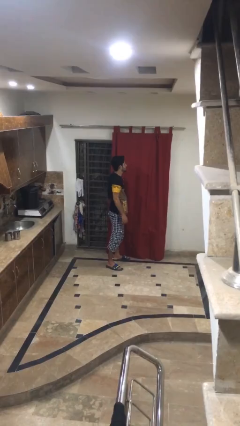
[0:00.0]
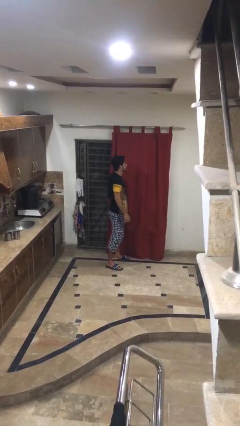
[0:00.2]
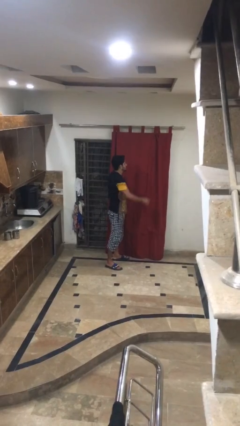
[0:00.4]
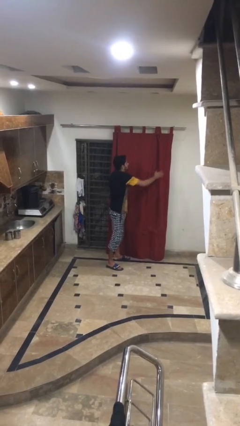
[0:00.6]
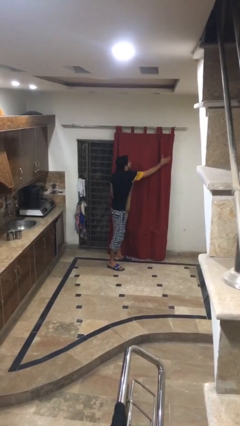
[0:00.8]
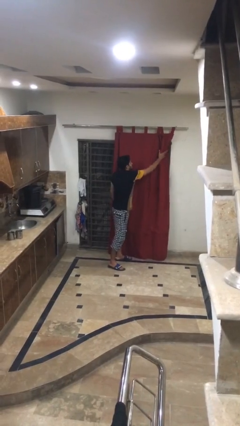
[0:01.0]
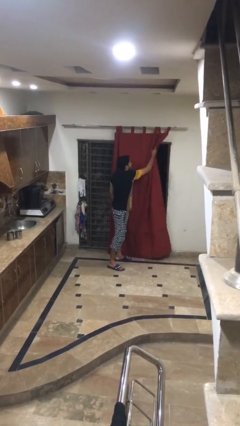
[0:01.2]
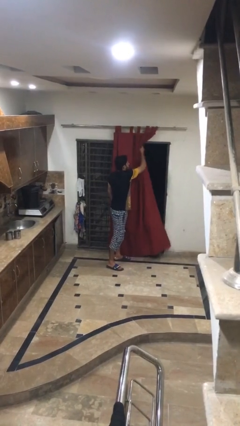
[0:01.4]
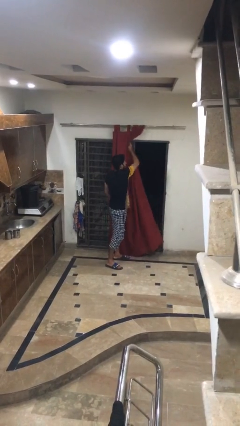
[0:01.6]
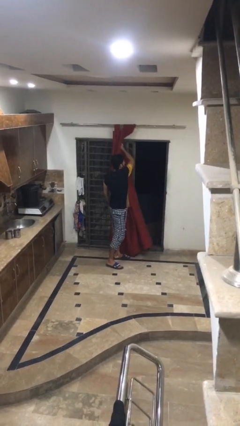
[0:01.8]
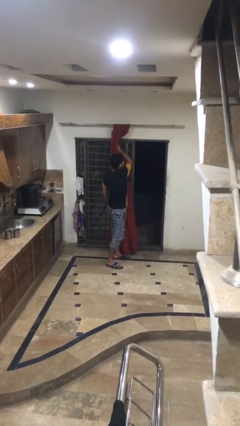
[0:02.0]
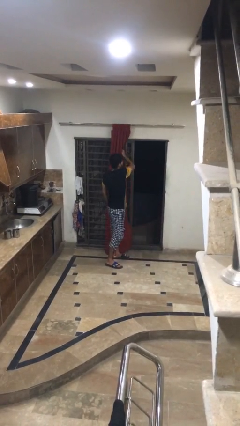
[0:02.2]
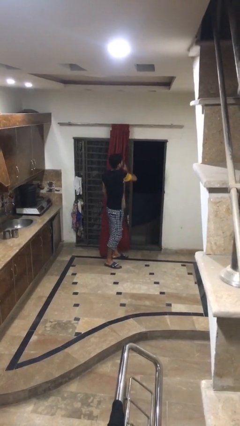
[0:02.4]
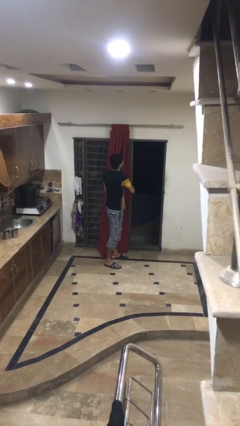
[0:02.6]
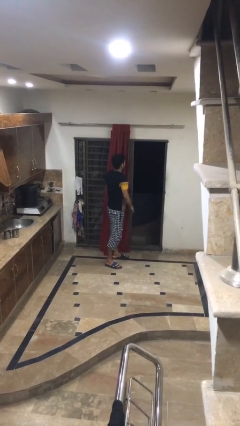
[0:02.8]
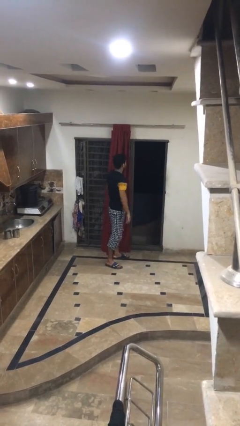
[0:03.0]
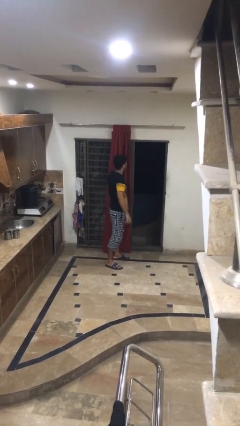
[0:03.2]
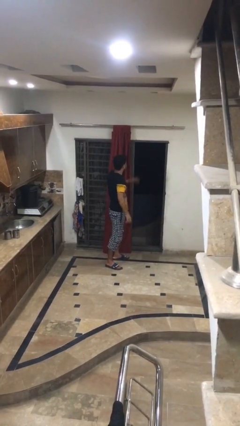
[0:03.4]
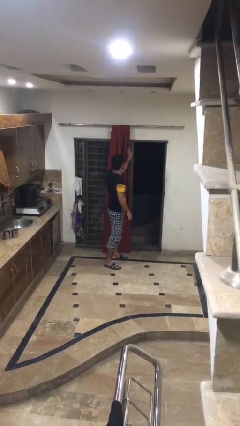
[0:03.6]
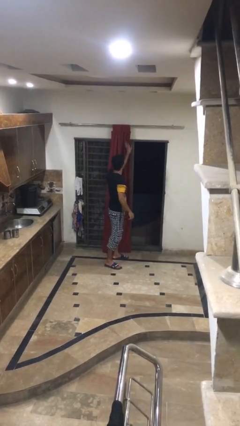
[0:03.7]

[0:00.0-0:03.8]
person opens curtains

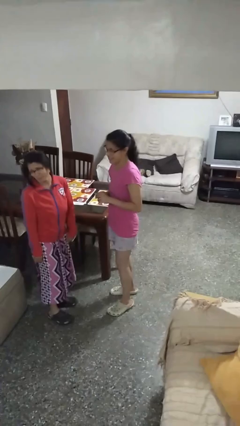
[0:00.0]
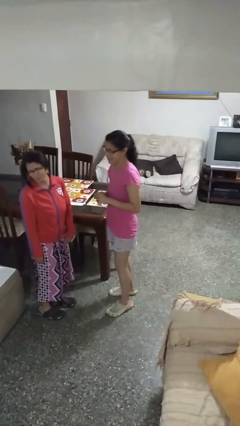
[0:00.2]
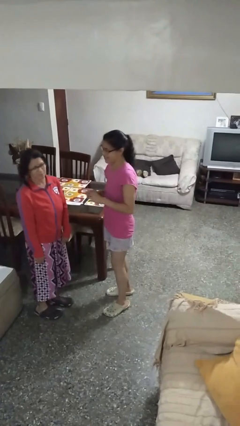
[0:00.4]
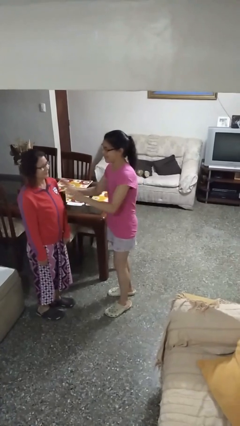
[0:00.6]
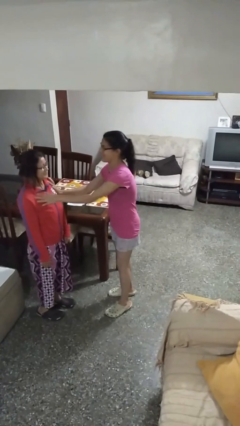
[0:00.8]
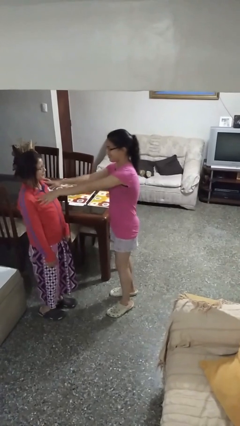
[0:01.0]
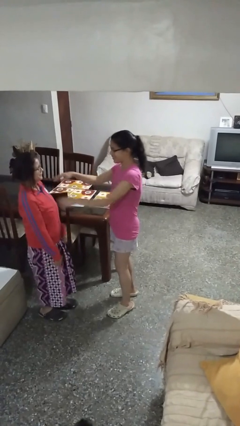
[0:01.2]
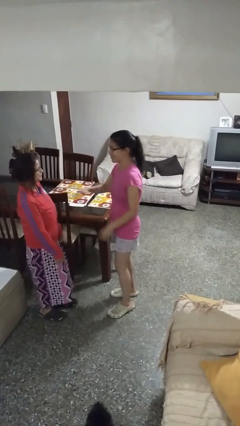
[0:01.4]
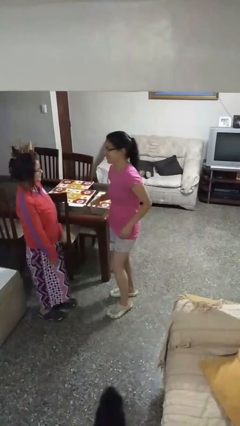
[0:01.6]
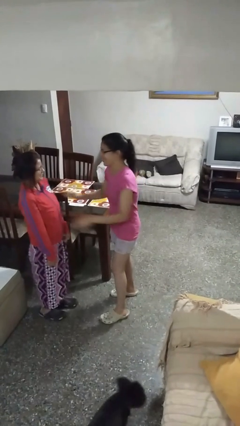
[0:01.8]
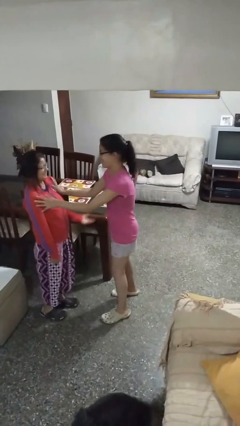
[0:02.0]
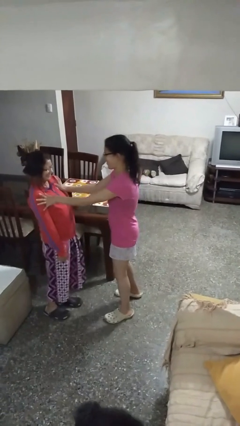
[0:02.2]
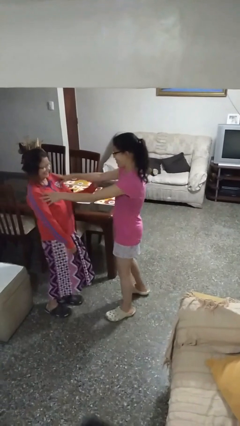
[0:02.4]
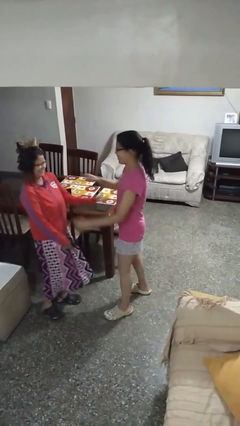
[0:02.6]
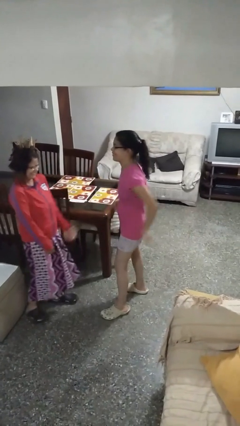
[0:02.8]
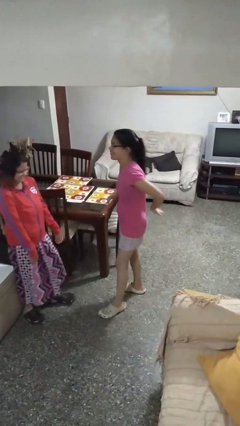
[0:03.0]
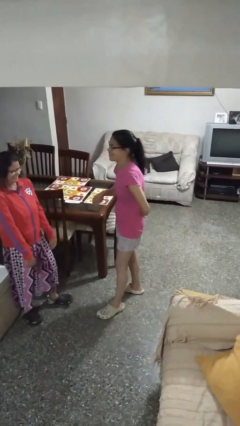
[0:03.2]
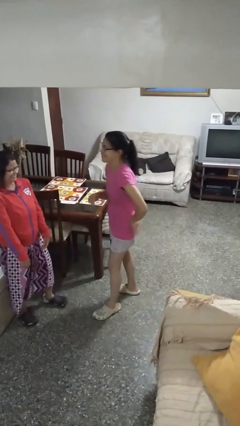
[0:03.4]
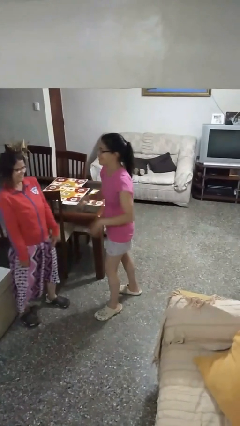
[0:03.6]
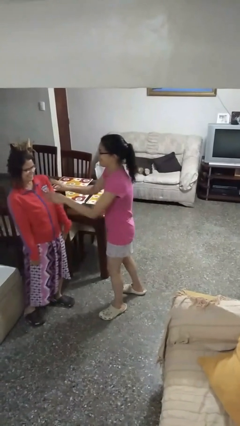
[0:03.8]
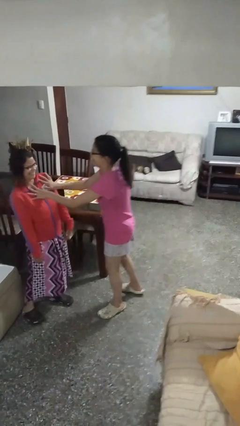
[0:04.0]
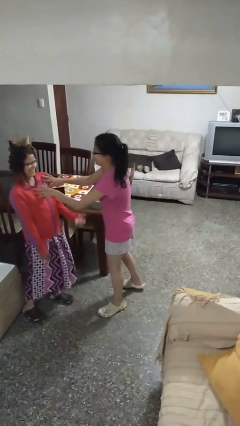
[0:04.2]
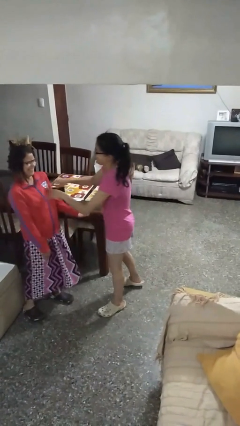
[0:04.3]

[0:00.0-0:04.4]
person shoves person

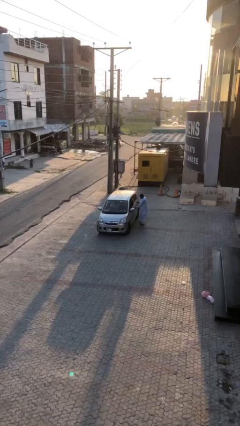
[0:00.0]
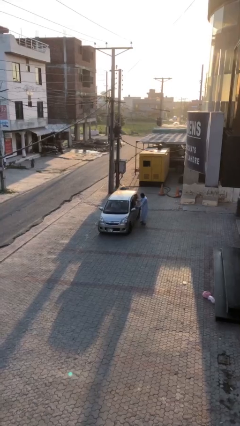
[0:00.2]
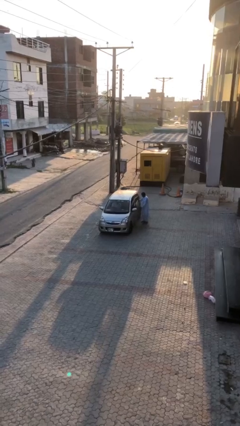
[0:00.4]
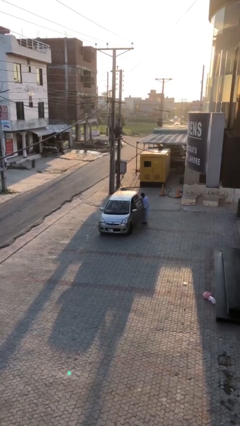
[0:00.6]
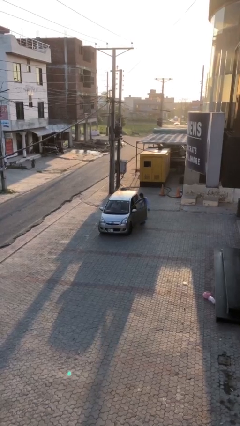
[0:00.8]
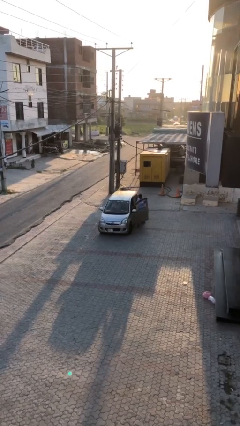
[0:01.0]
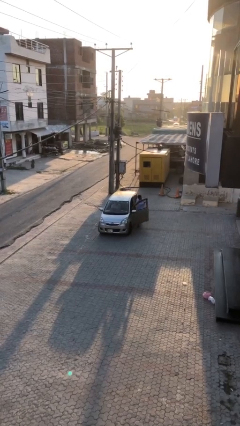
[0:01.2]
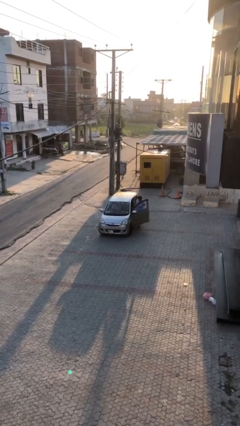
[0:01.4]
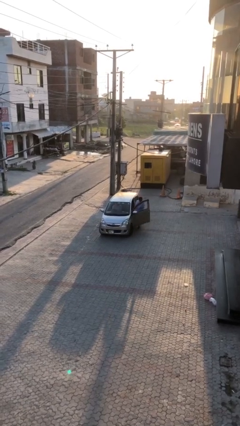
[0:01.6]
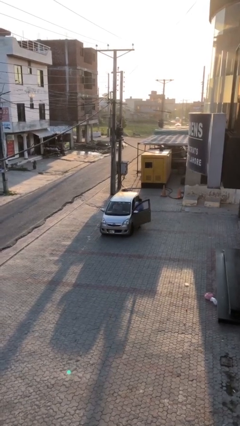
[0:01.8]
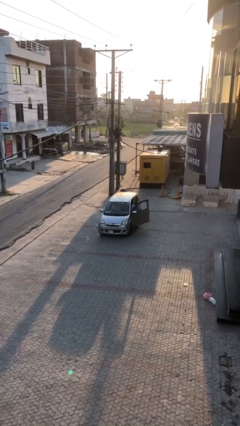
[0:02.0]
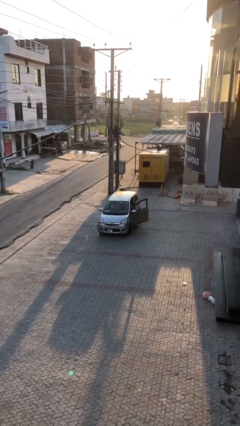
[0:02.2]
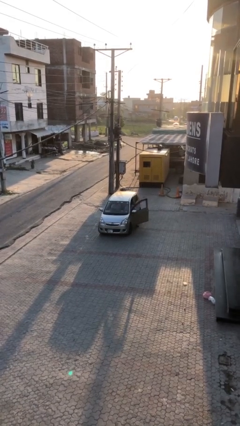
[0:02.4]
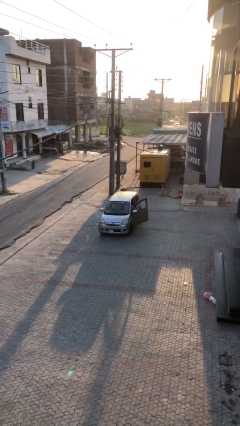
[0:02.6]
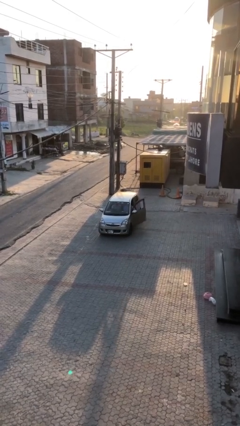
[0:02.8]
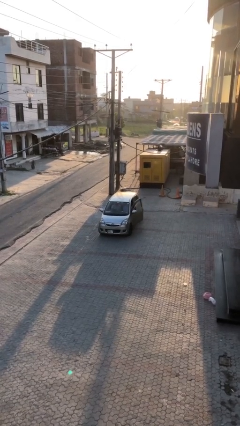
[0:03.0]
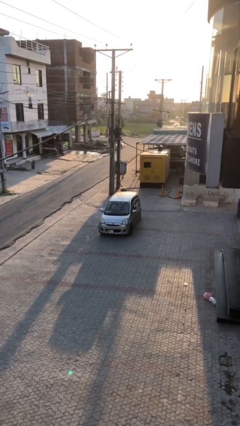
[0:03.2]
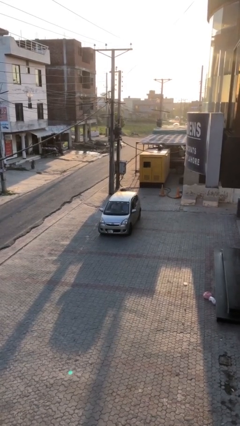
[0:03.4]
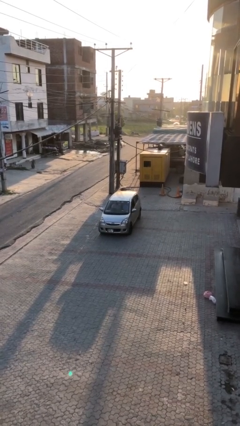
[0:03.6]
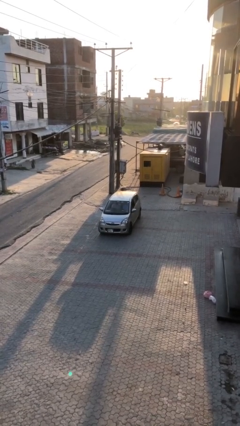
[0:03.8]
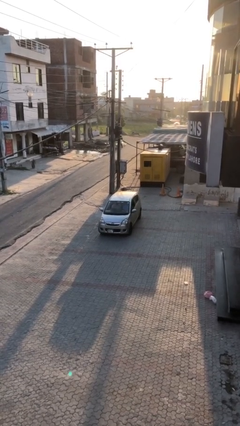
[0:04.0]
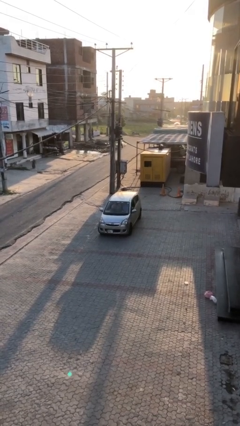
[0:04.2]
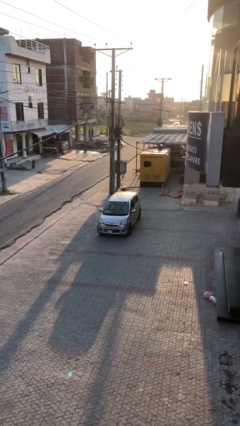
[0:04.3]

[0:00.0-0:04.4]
car picks up person

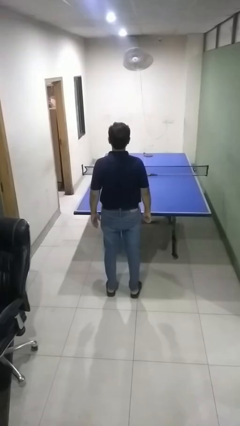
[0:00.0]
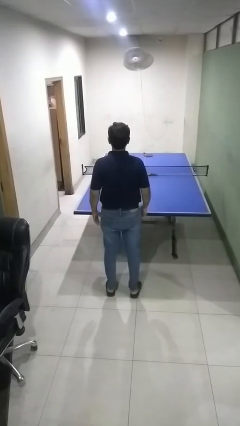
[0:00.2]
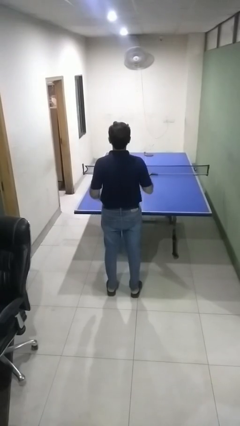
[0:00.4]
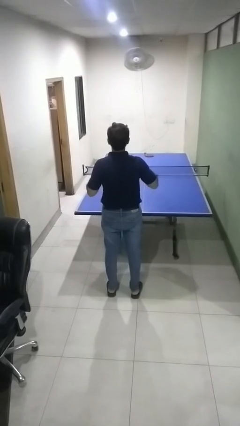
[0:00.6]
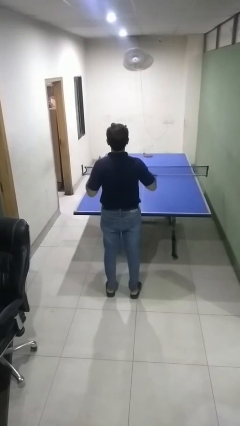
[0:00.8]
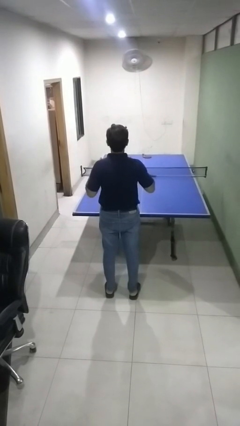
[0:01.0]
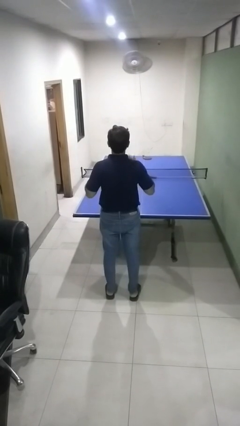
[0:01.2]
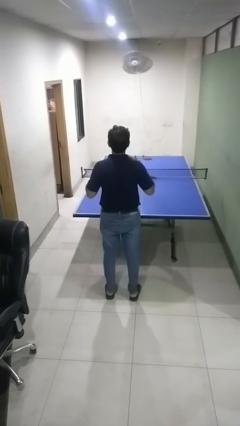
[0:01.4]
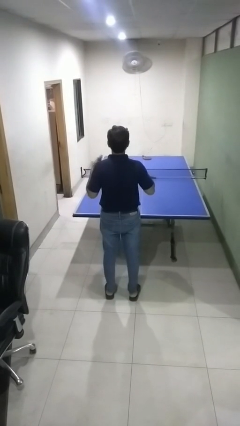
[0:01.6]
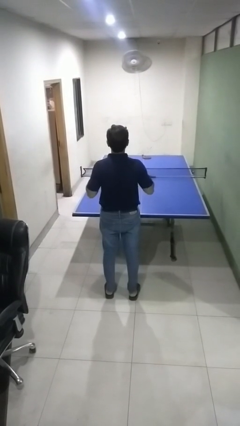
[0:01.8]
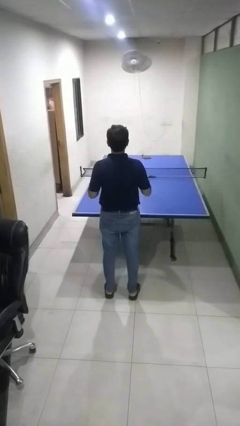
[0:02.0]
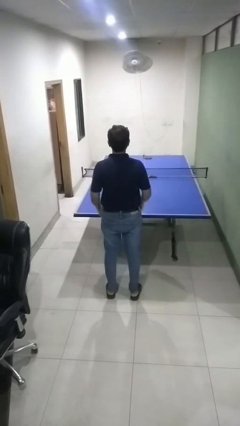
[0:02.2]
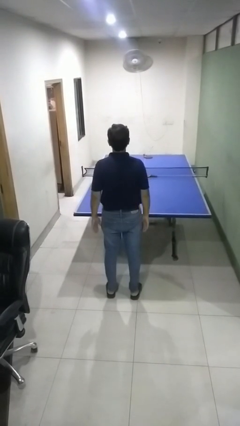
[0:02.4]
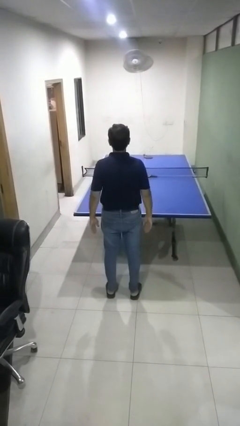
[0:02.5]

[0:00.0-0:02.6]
person drums on chest

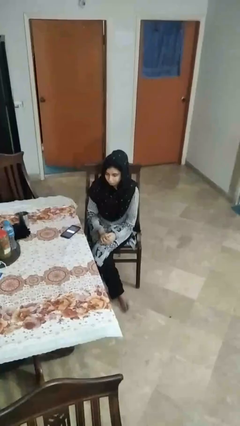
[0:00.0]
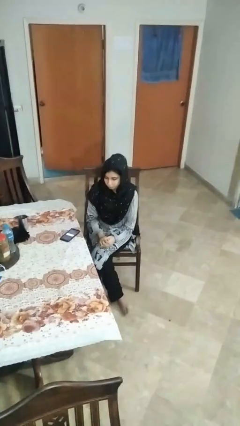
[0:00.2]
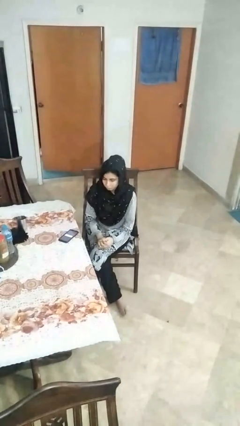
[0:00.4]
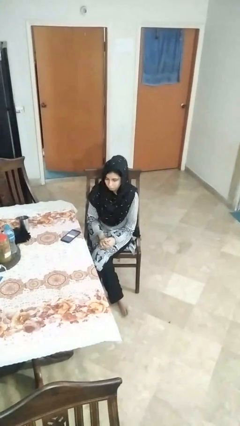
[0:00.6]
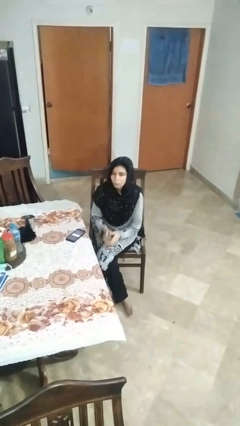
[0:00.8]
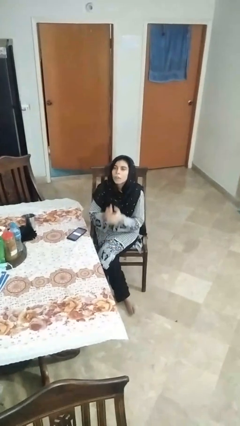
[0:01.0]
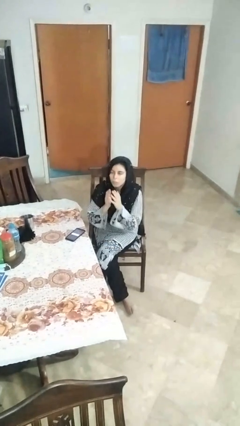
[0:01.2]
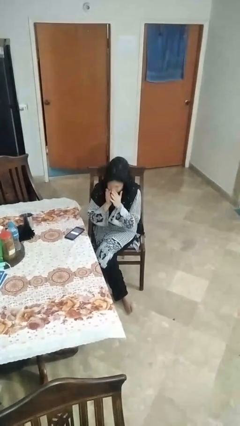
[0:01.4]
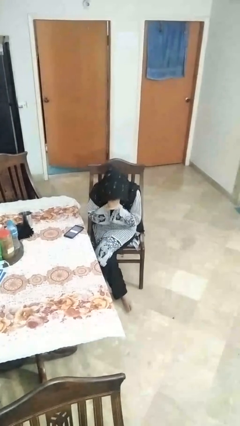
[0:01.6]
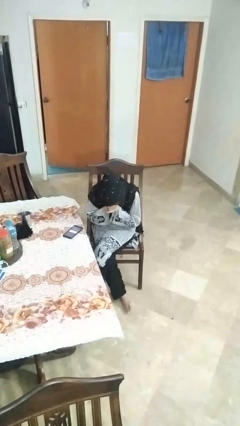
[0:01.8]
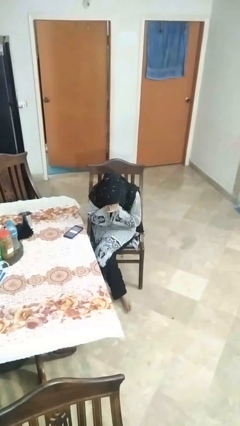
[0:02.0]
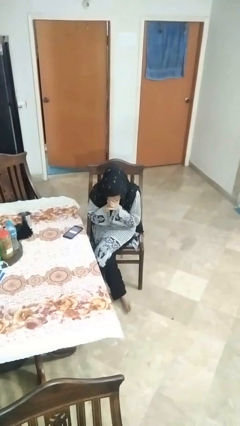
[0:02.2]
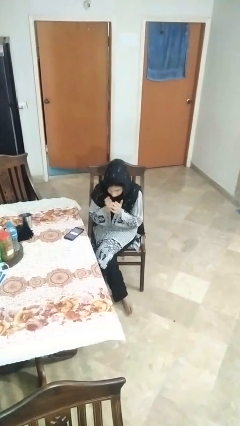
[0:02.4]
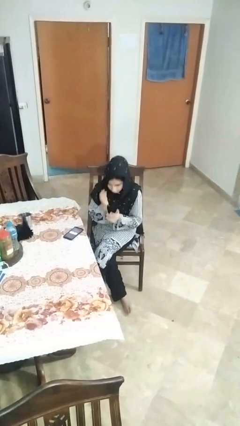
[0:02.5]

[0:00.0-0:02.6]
person sneezes into hand
